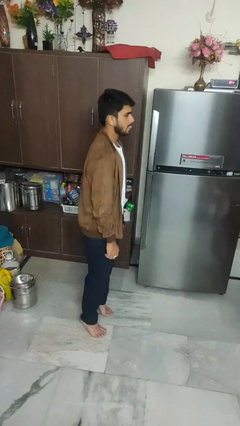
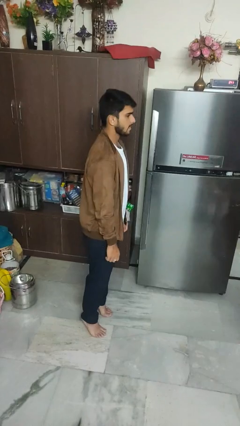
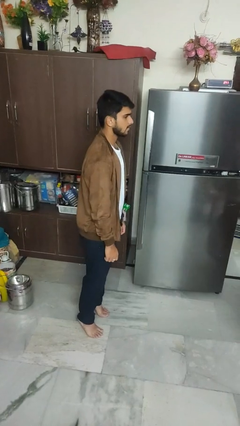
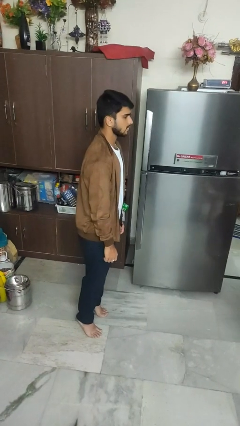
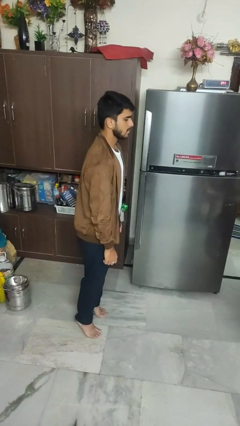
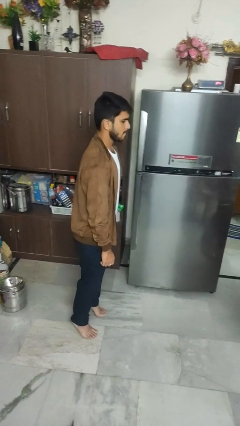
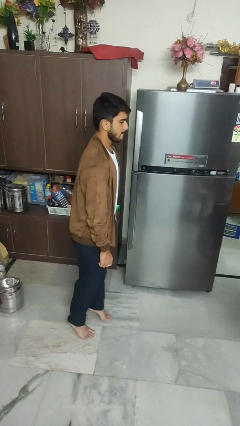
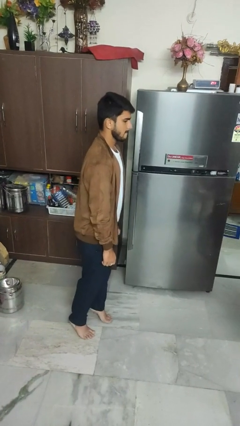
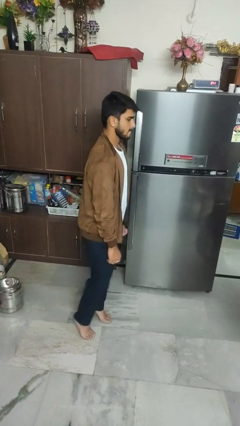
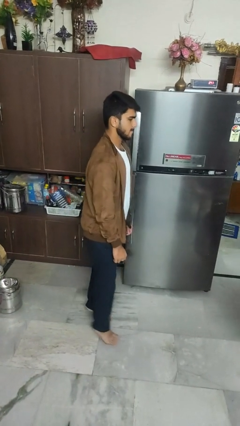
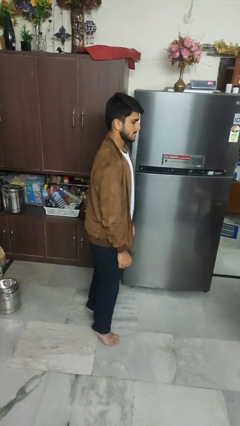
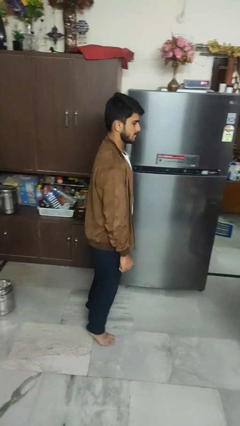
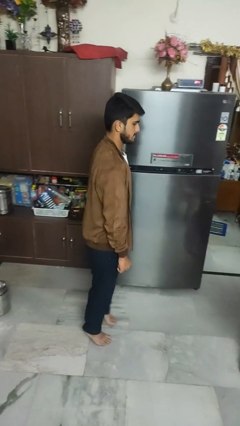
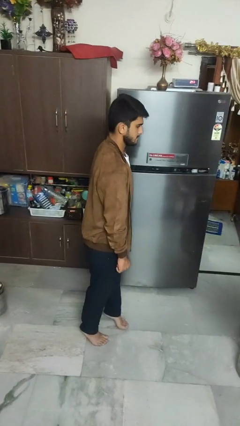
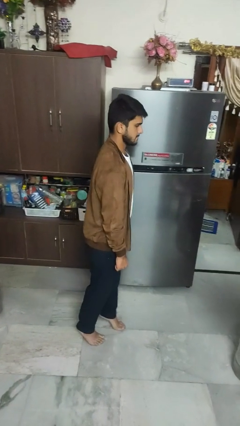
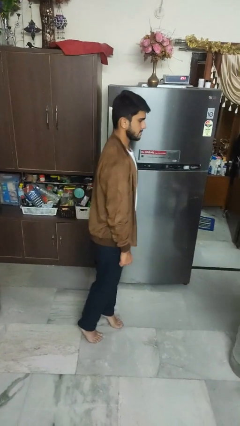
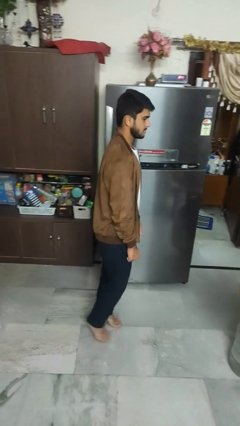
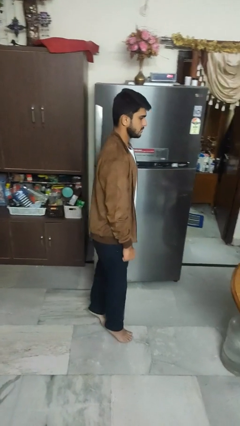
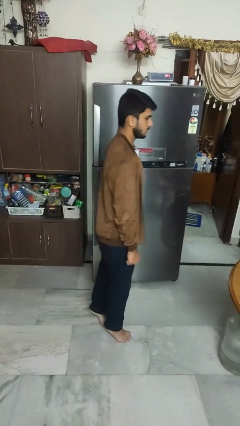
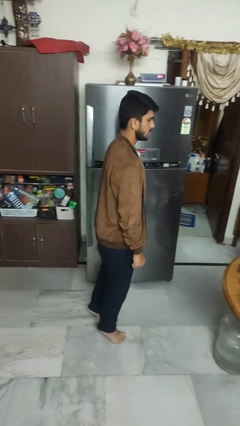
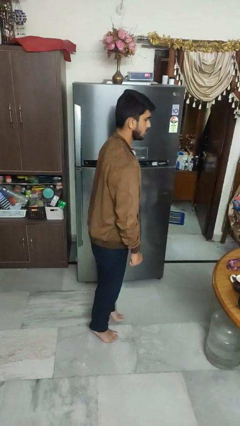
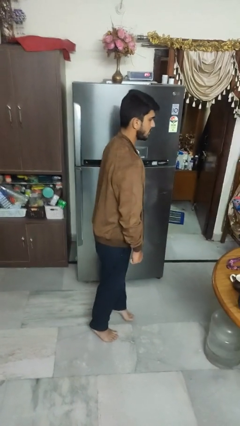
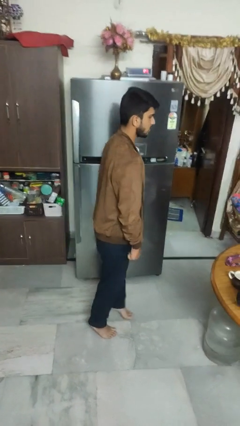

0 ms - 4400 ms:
person walks tiptoe

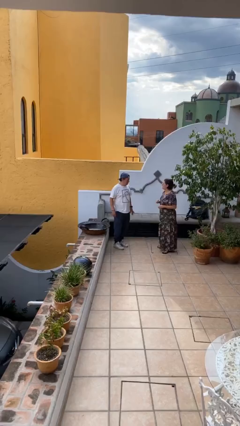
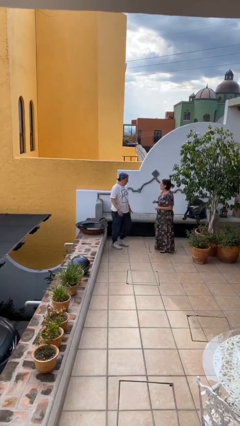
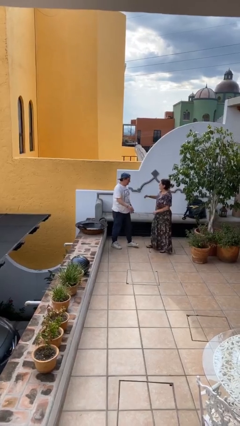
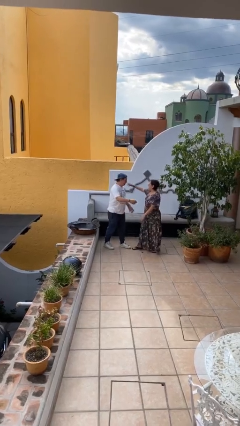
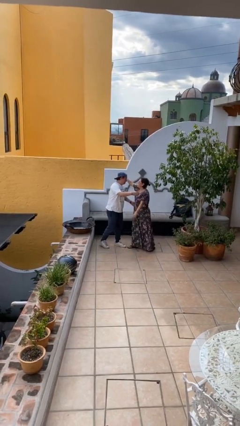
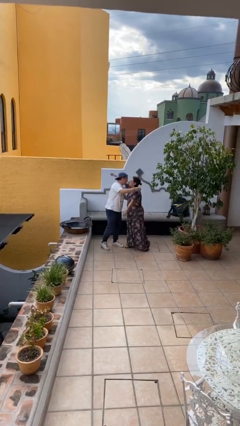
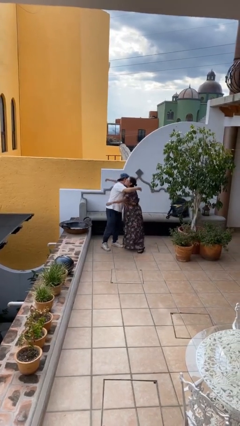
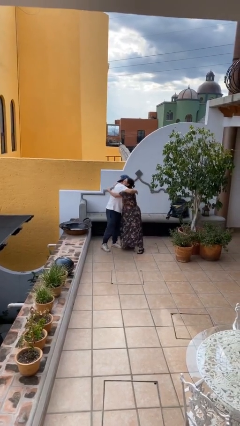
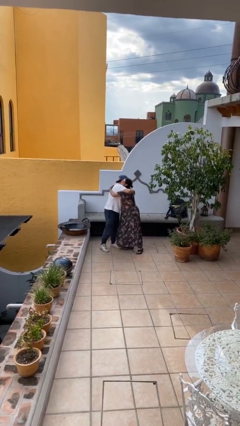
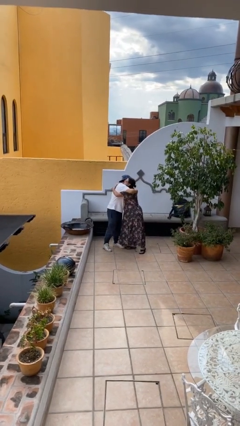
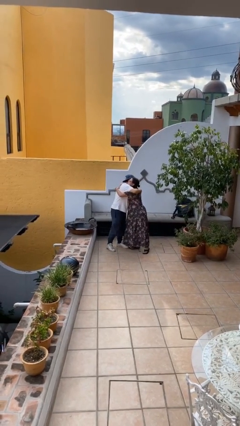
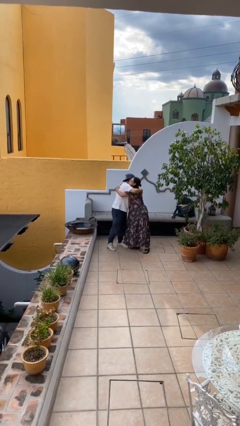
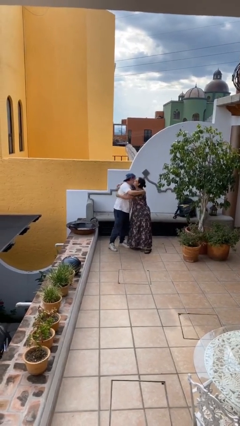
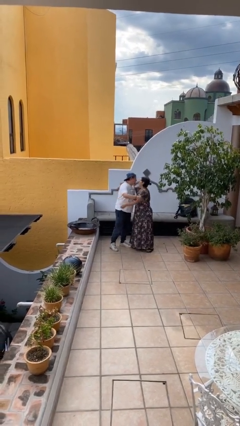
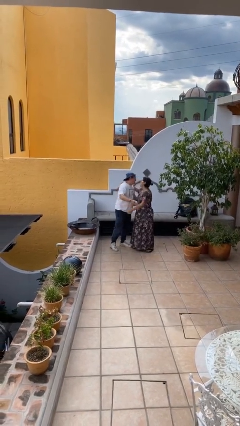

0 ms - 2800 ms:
person embraces person

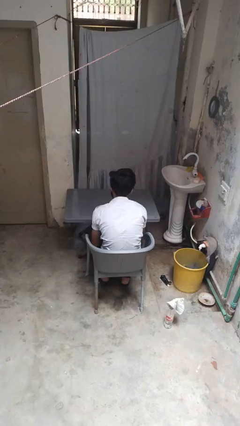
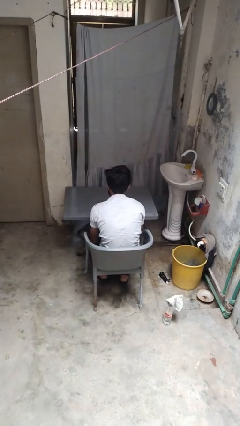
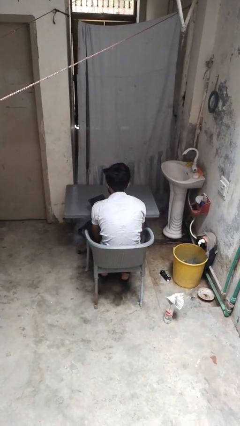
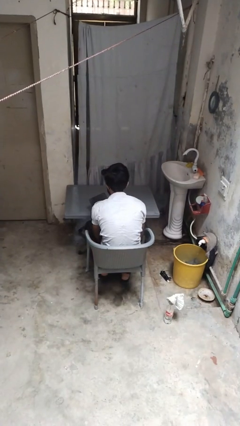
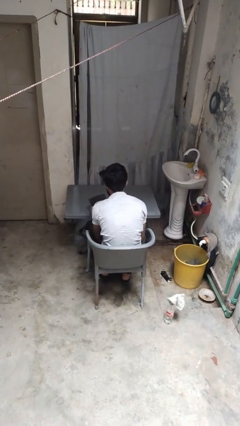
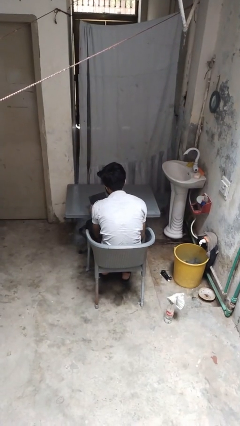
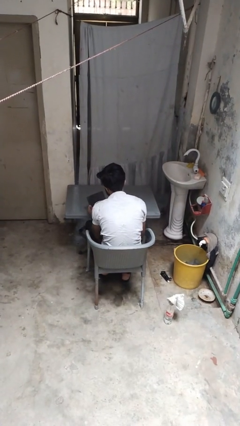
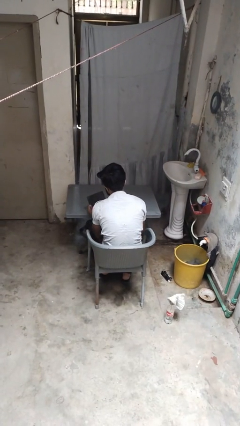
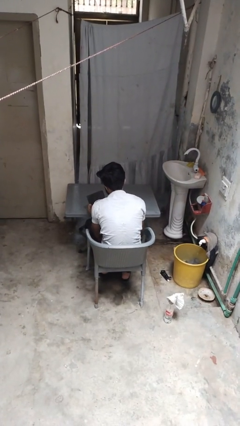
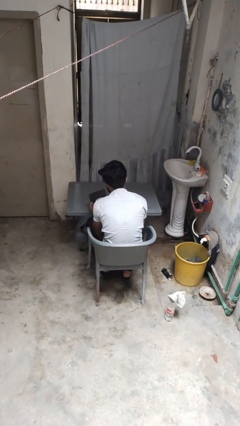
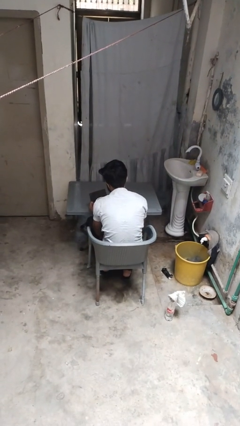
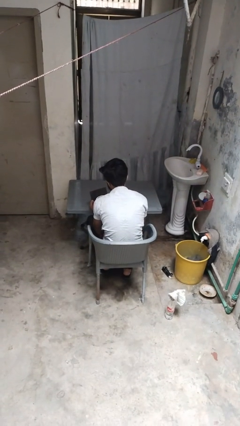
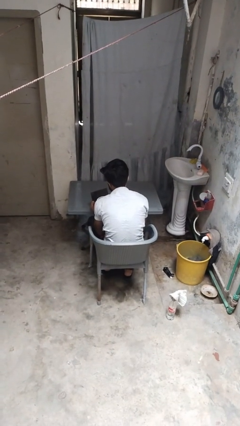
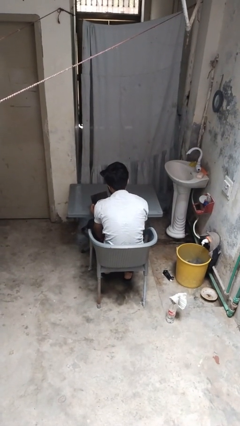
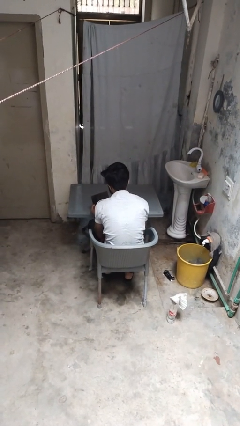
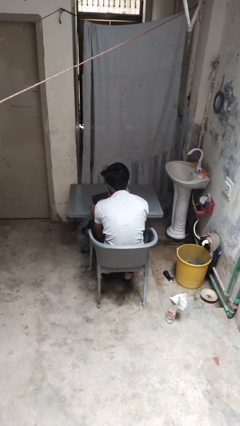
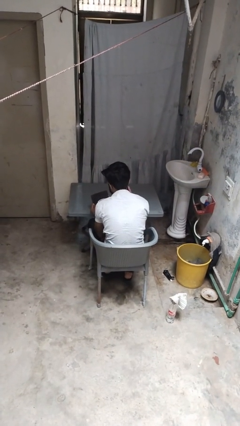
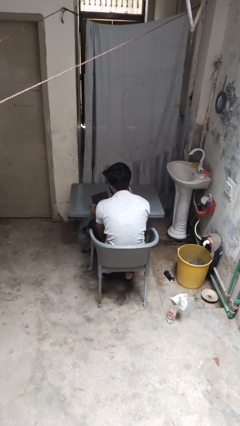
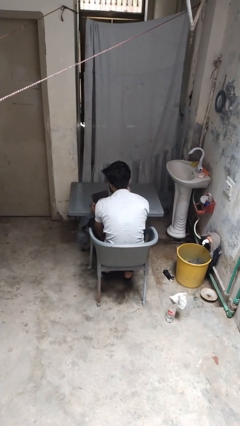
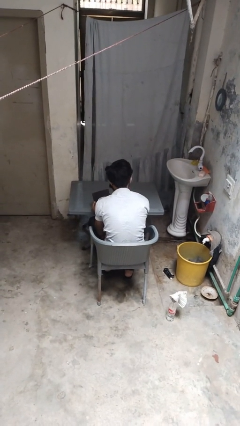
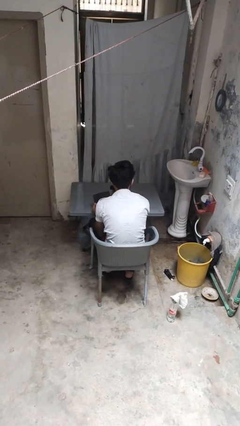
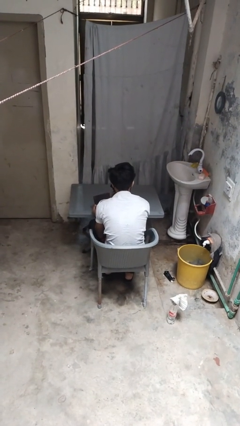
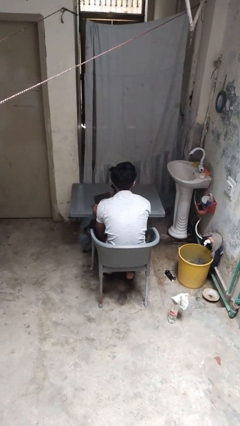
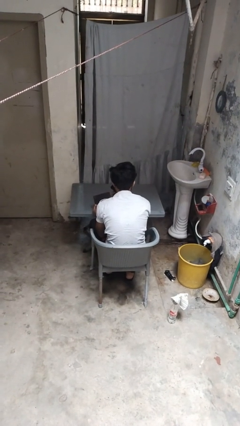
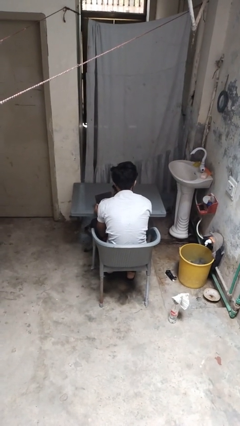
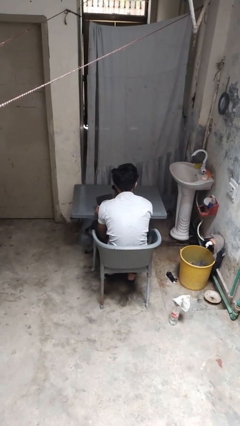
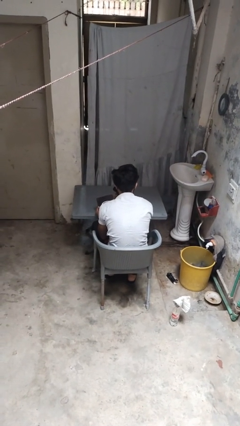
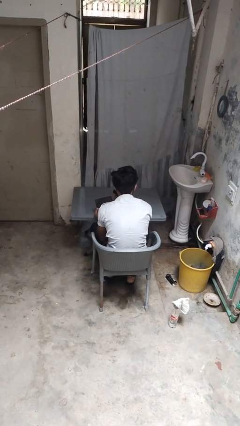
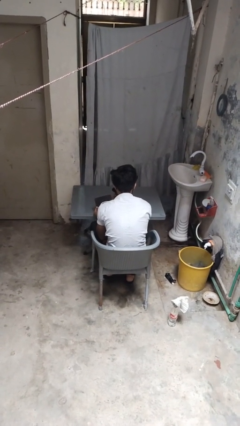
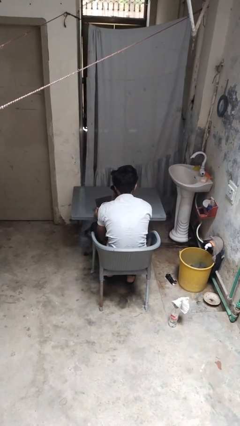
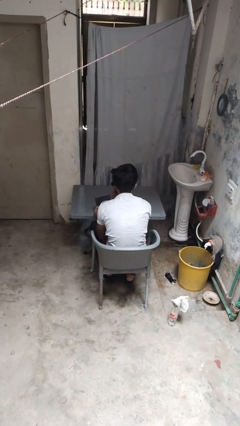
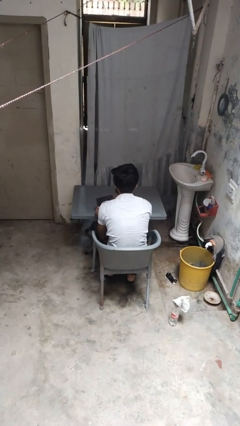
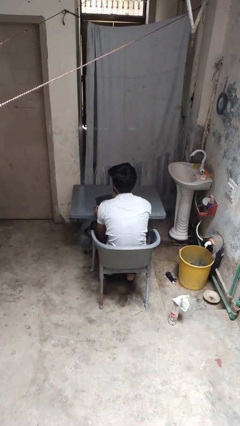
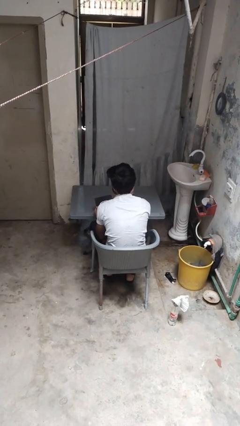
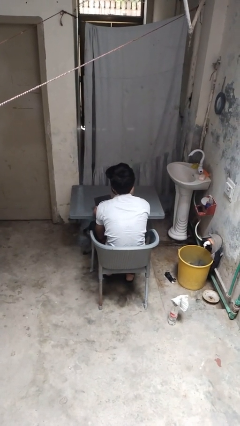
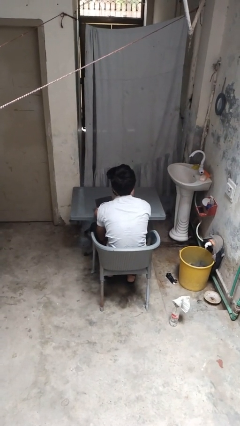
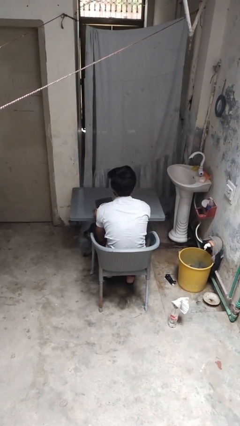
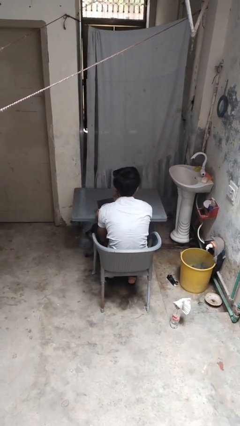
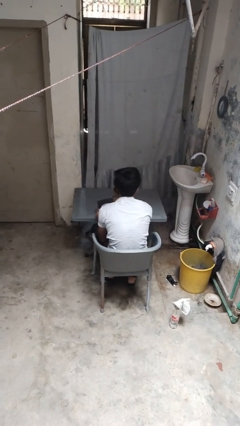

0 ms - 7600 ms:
person applies eye makeup

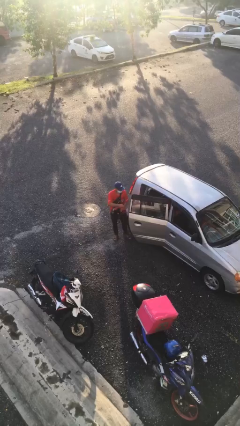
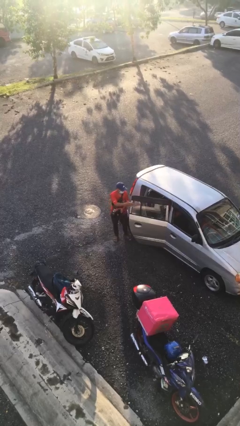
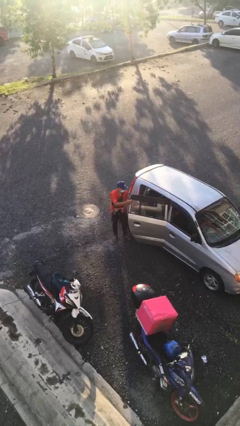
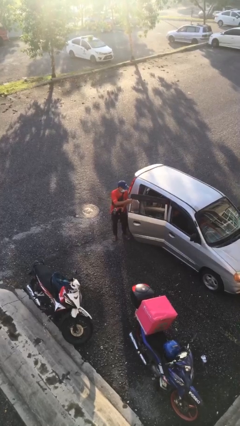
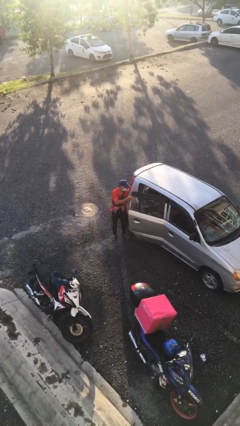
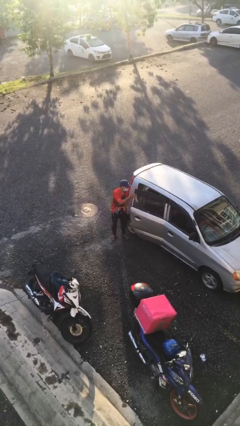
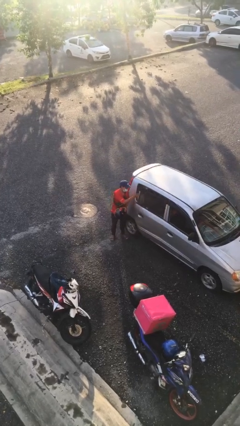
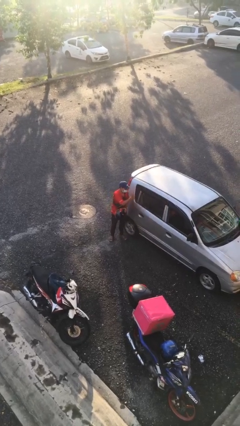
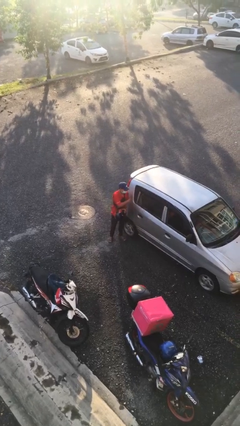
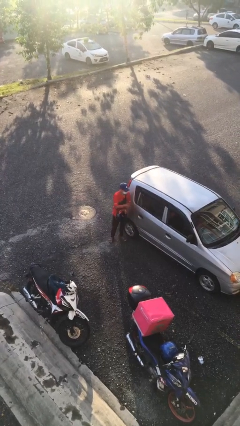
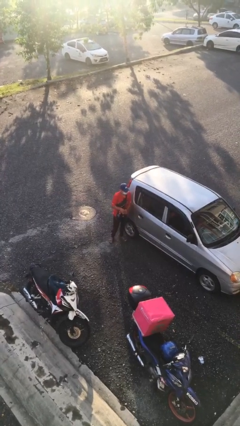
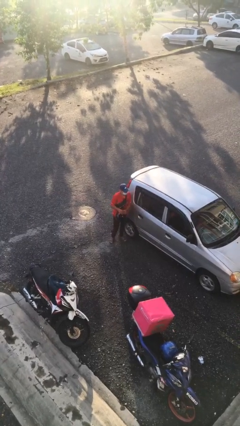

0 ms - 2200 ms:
person closes car door

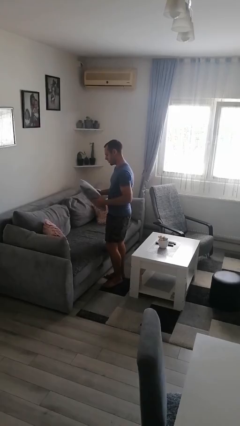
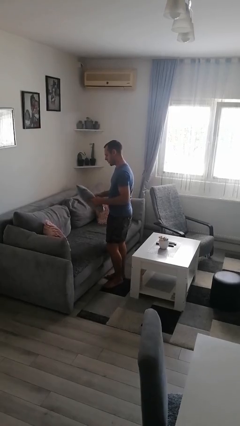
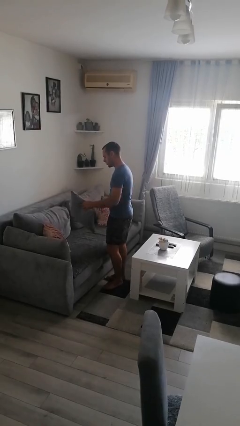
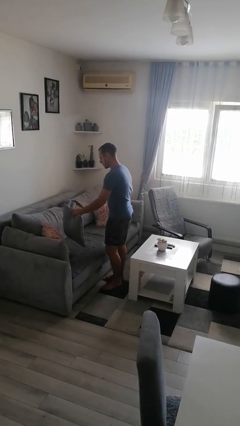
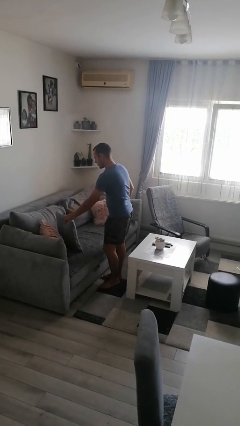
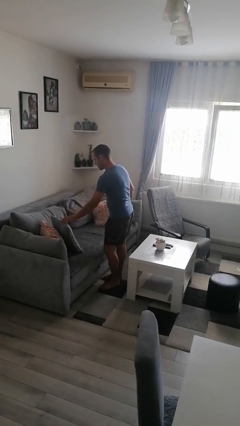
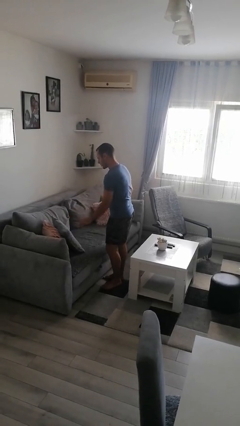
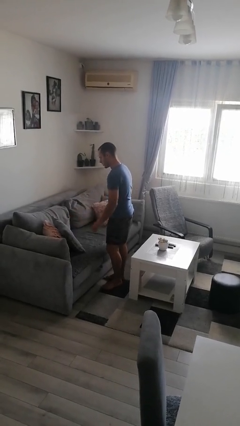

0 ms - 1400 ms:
person puts down object on couch
